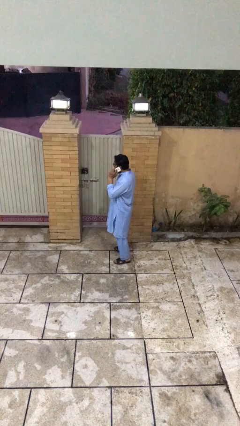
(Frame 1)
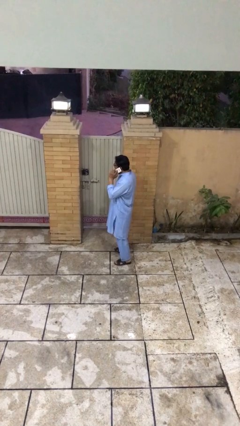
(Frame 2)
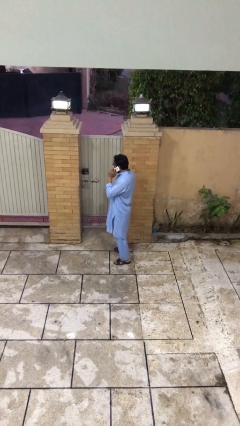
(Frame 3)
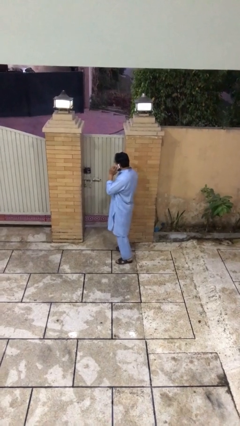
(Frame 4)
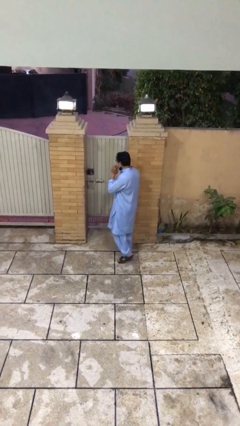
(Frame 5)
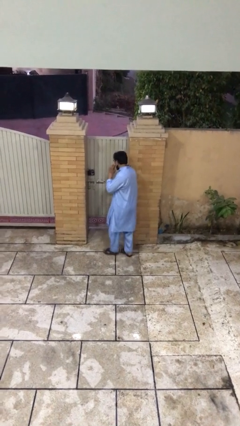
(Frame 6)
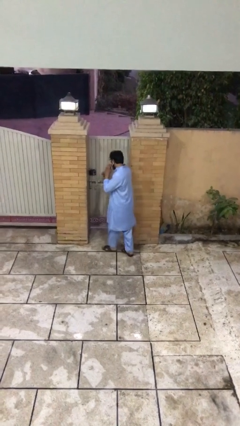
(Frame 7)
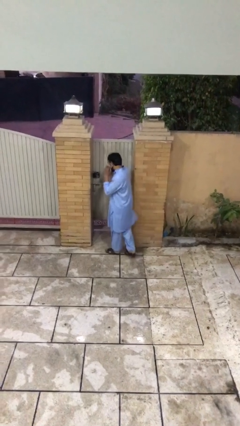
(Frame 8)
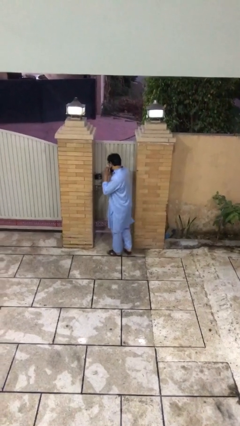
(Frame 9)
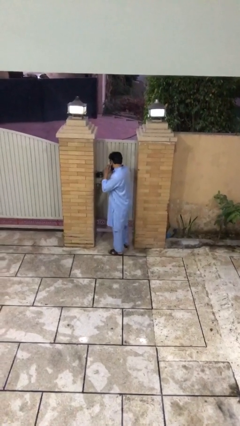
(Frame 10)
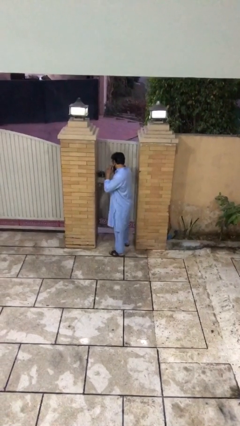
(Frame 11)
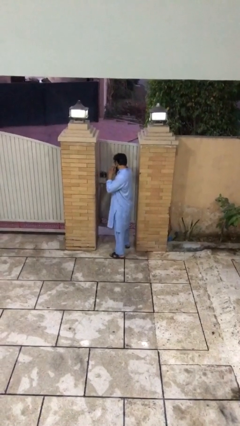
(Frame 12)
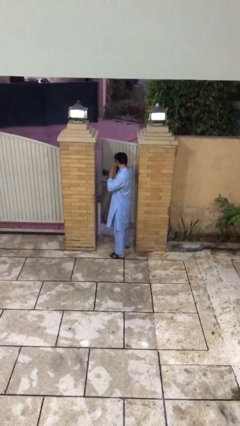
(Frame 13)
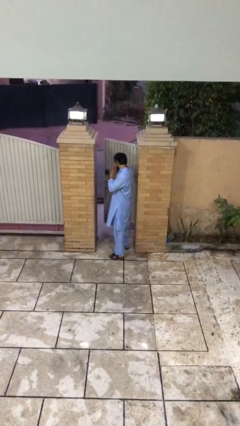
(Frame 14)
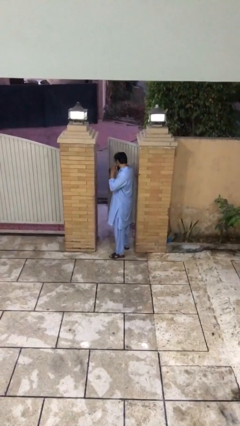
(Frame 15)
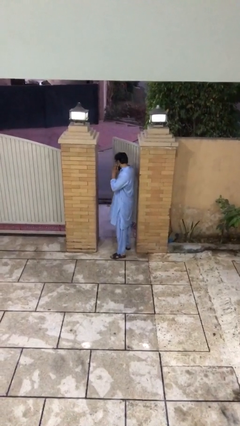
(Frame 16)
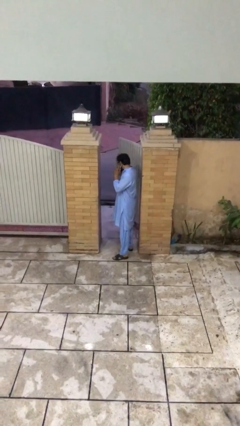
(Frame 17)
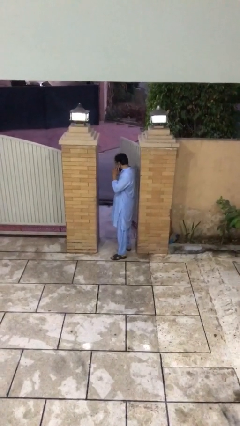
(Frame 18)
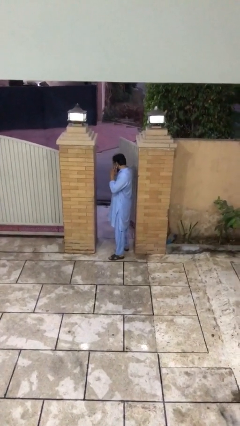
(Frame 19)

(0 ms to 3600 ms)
person opens facility door

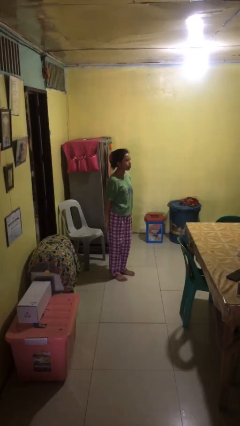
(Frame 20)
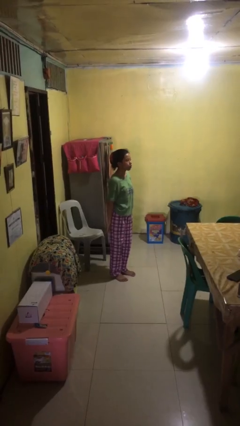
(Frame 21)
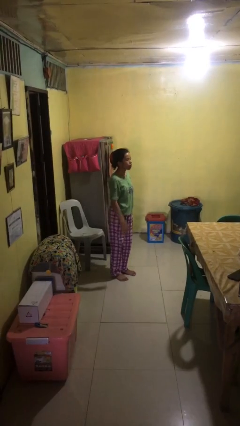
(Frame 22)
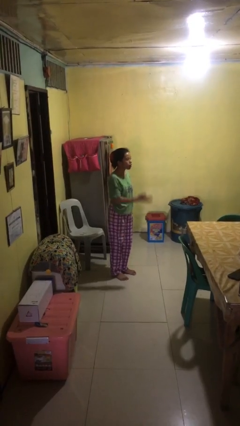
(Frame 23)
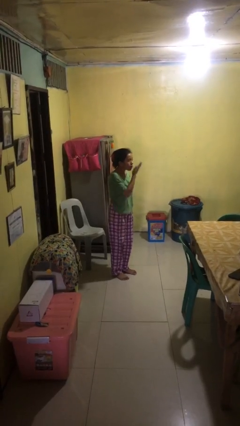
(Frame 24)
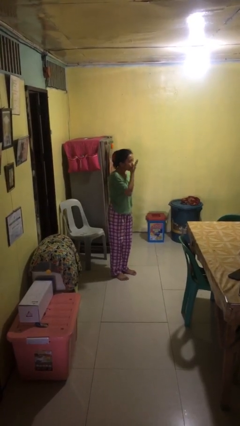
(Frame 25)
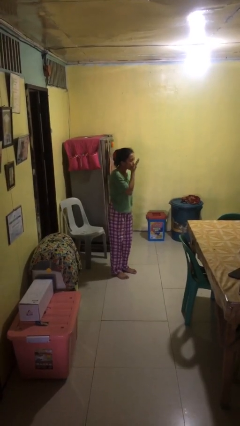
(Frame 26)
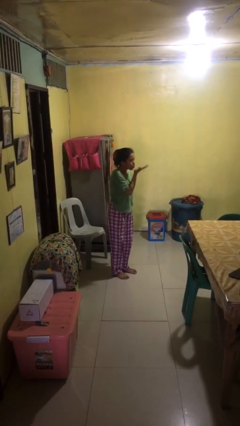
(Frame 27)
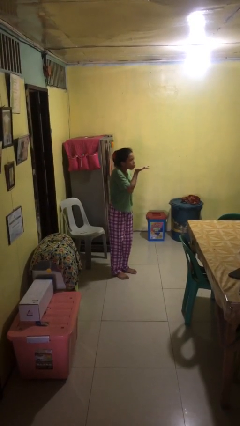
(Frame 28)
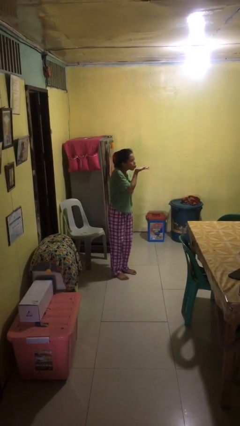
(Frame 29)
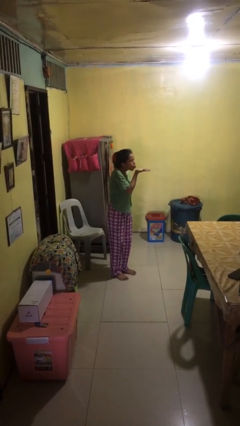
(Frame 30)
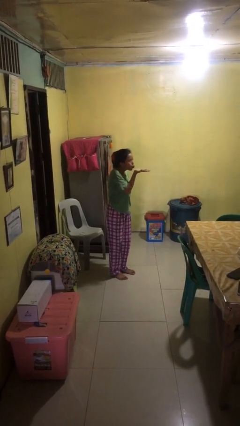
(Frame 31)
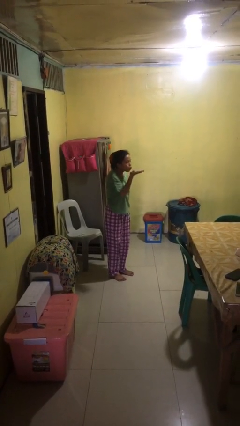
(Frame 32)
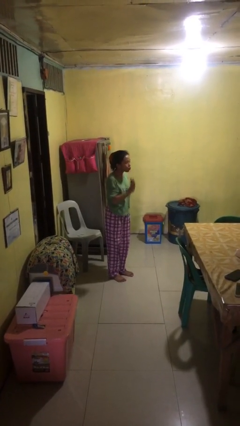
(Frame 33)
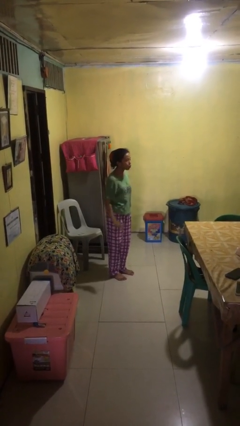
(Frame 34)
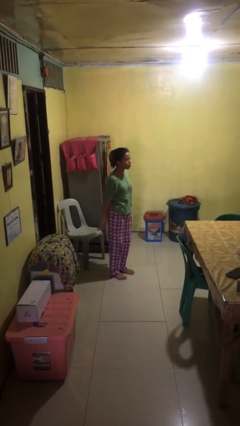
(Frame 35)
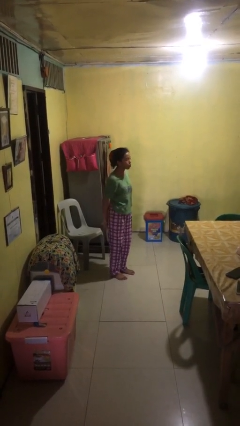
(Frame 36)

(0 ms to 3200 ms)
person gestures blow kiss

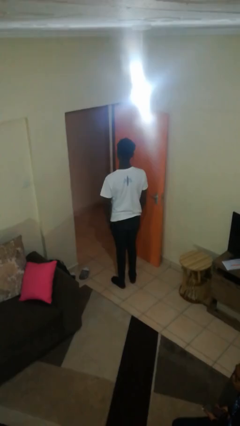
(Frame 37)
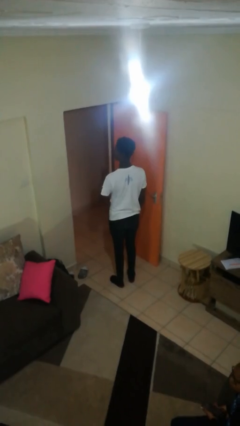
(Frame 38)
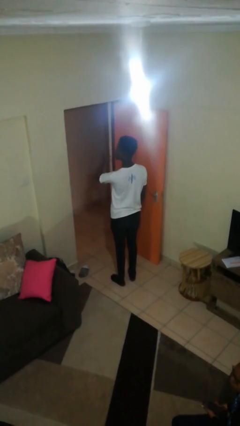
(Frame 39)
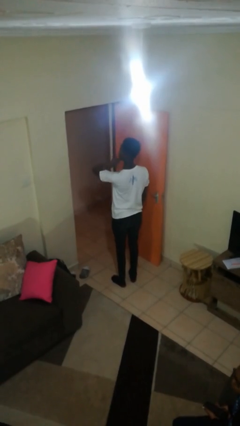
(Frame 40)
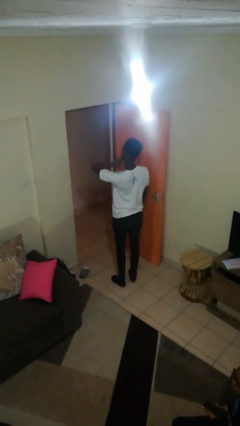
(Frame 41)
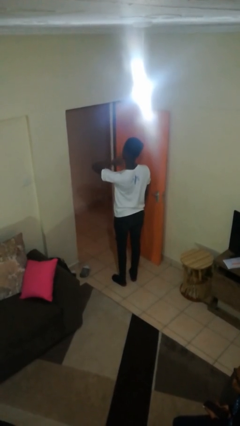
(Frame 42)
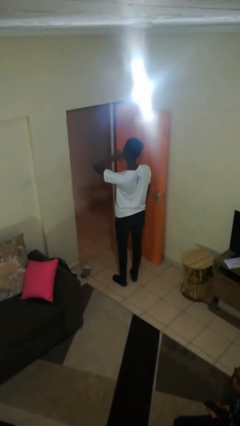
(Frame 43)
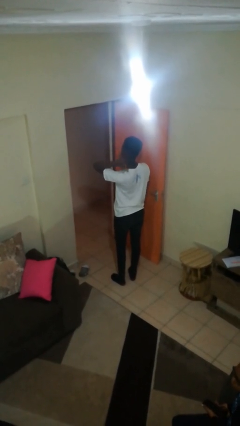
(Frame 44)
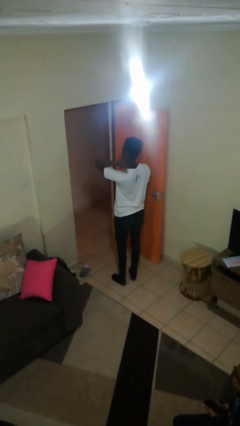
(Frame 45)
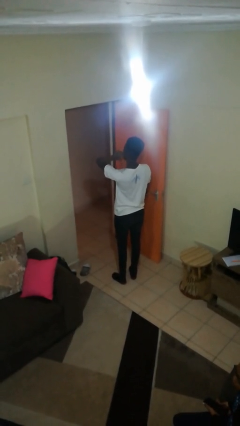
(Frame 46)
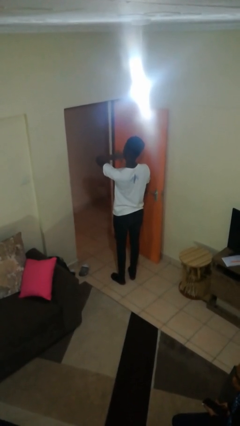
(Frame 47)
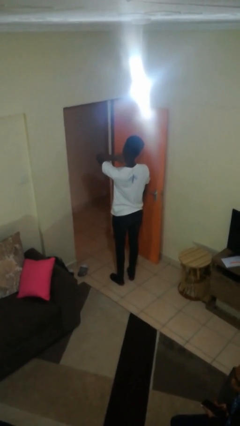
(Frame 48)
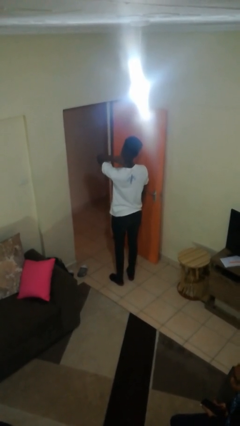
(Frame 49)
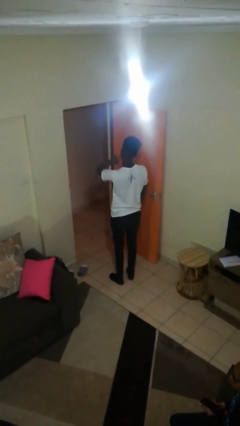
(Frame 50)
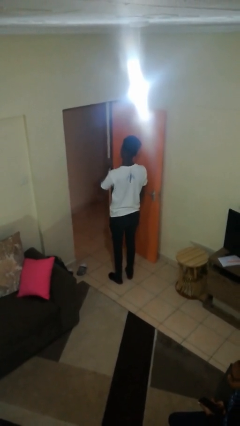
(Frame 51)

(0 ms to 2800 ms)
person gestures behind me

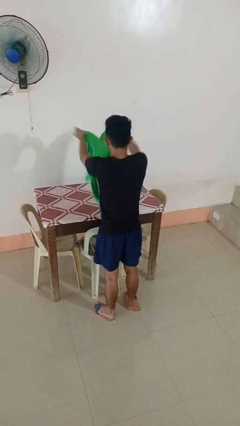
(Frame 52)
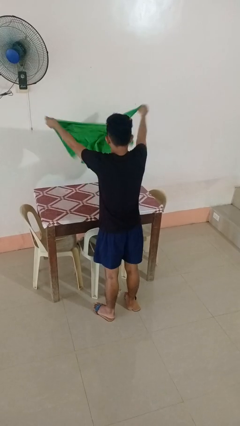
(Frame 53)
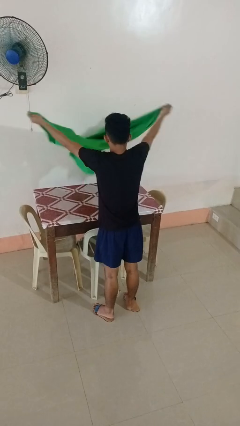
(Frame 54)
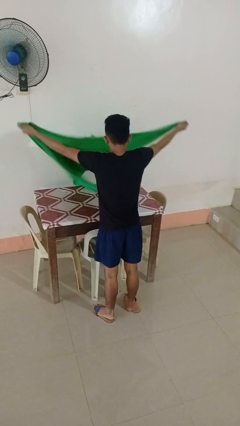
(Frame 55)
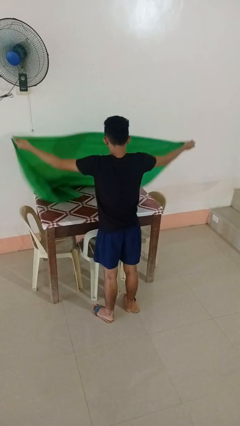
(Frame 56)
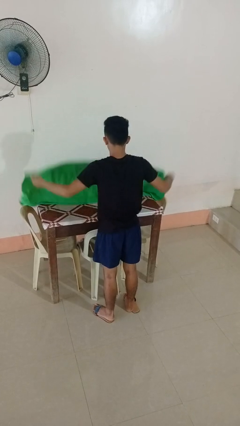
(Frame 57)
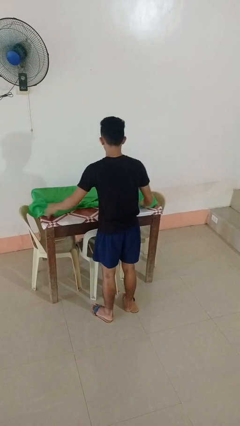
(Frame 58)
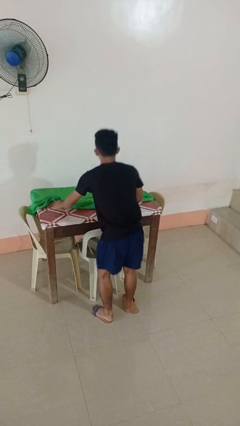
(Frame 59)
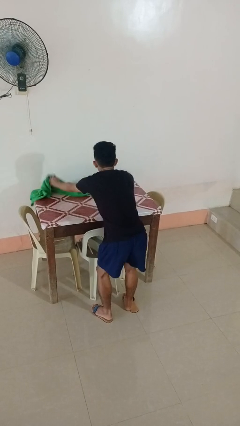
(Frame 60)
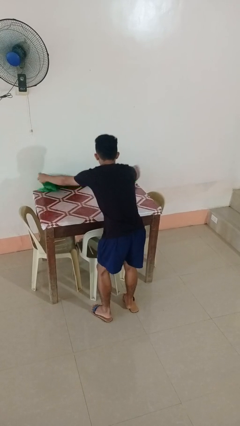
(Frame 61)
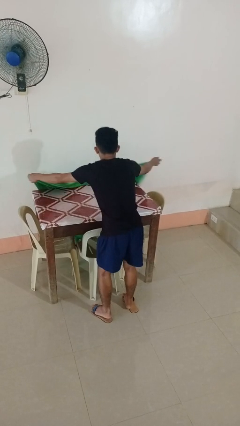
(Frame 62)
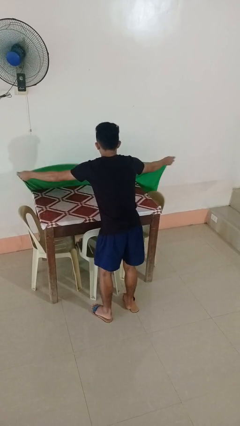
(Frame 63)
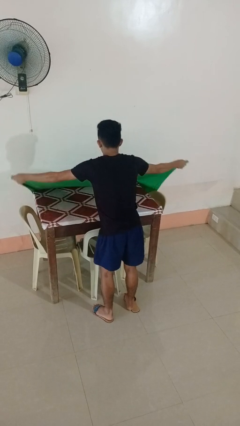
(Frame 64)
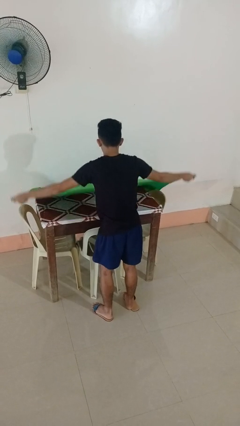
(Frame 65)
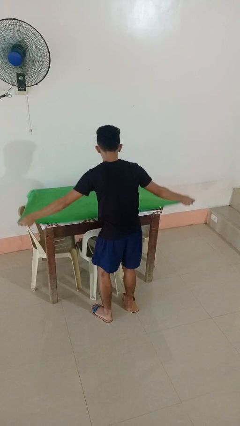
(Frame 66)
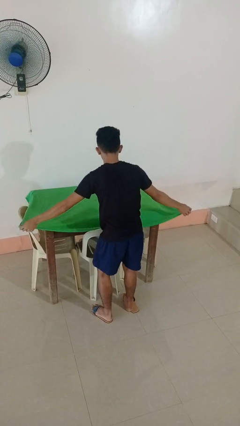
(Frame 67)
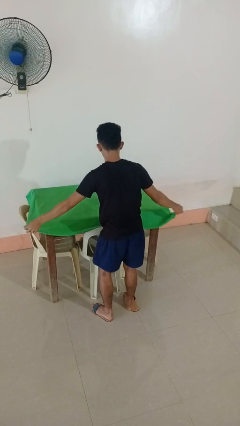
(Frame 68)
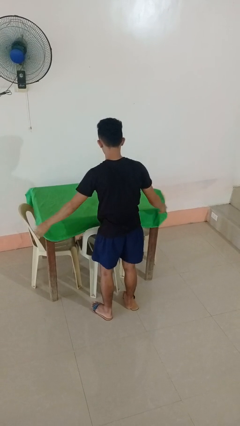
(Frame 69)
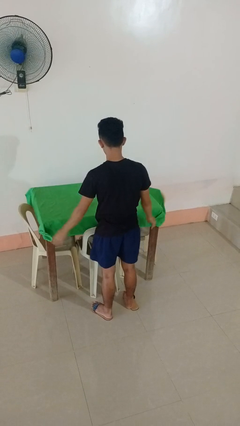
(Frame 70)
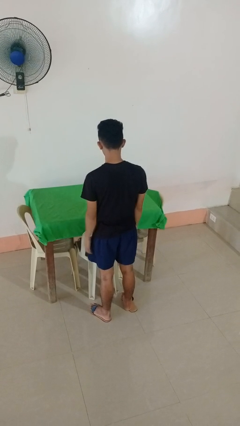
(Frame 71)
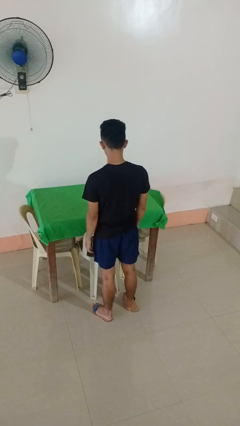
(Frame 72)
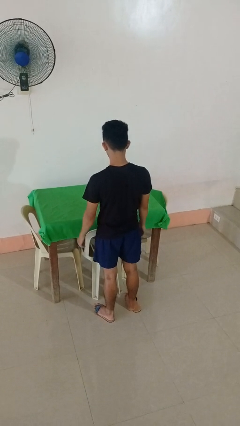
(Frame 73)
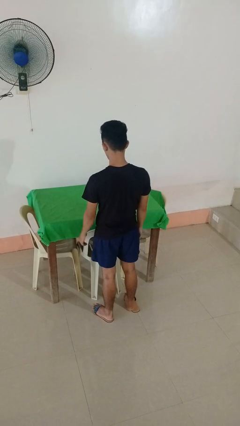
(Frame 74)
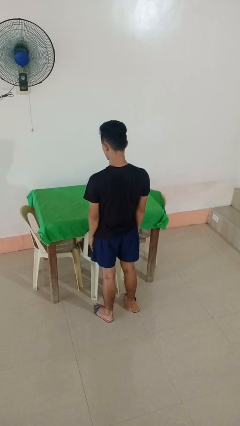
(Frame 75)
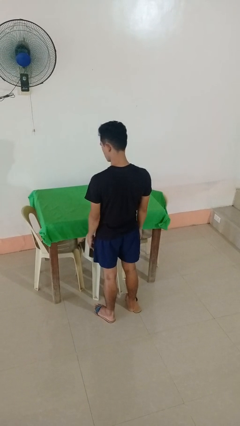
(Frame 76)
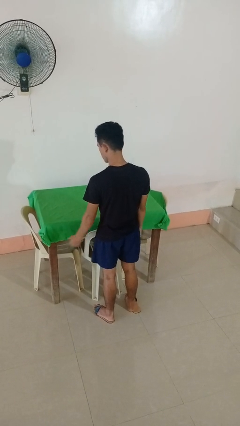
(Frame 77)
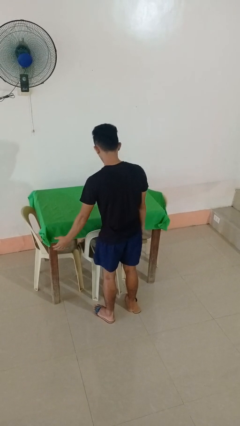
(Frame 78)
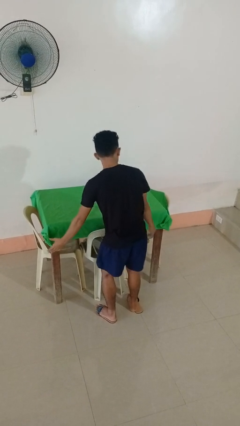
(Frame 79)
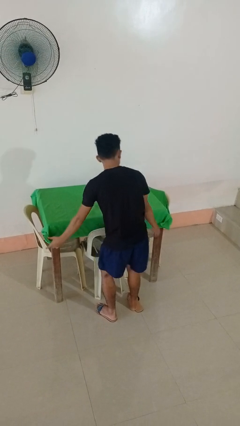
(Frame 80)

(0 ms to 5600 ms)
person spreads tablecloth

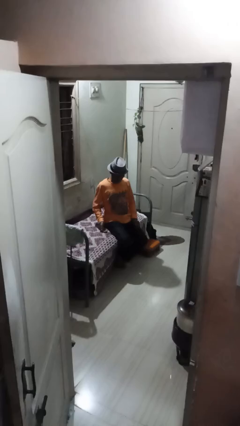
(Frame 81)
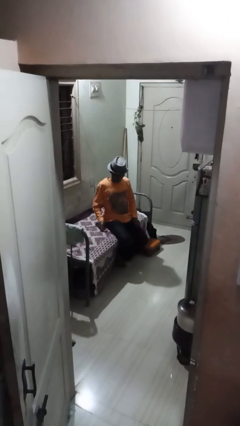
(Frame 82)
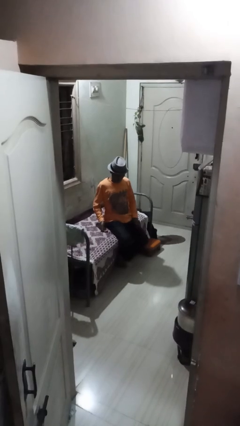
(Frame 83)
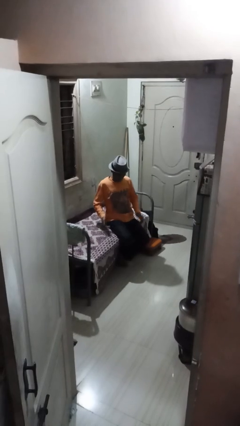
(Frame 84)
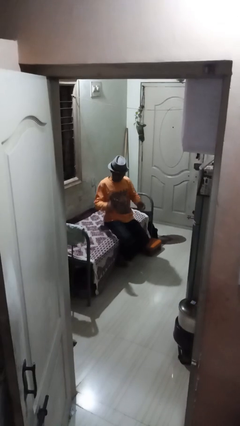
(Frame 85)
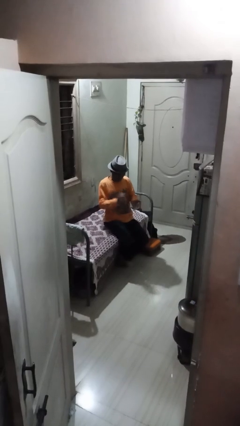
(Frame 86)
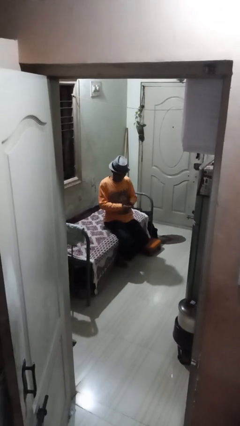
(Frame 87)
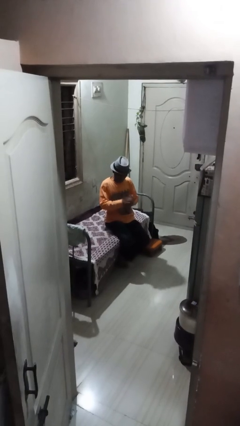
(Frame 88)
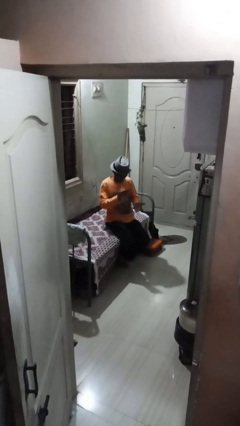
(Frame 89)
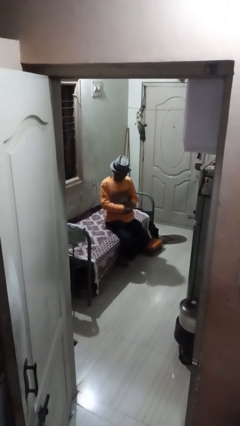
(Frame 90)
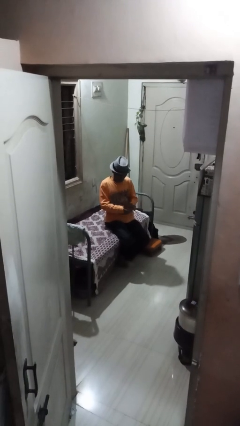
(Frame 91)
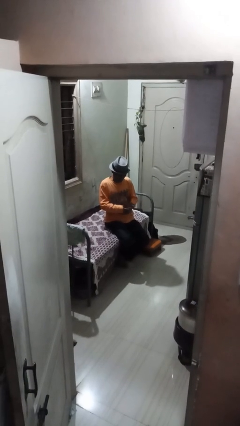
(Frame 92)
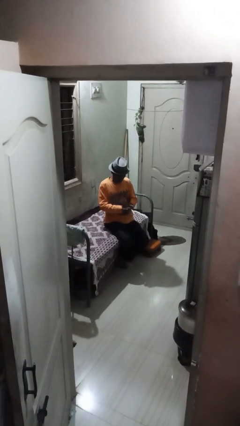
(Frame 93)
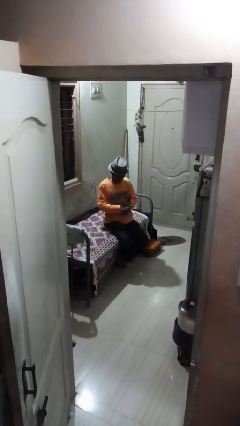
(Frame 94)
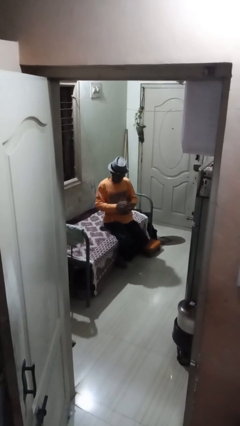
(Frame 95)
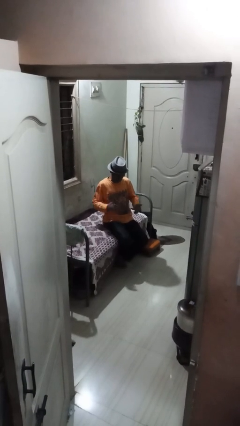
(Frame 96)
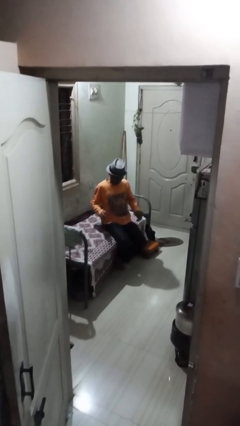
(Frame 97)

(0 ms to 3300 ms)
person claps hands
